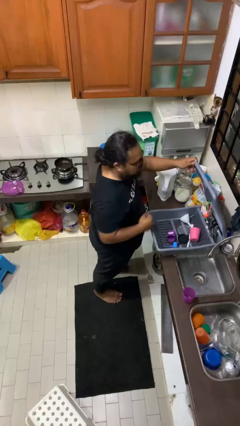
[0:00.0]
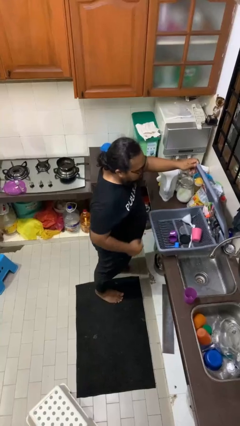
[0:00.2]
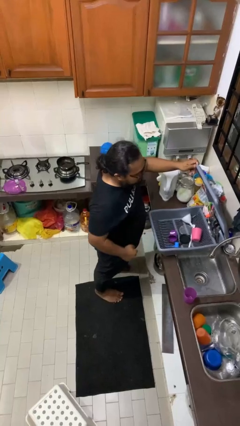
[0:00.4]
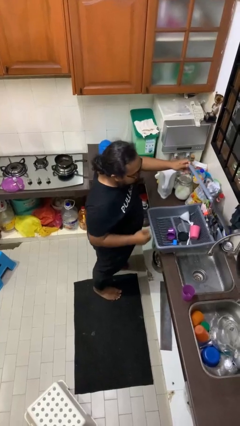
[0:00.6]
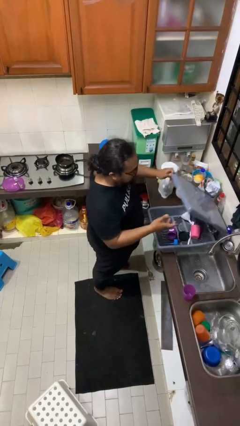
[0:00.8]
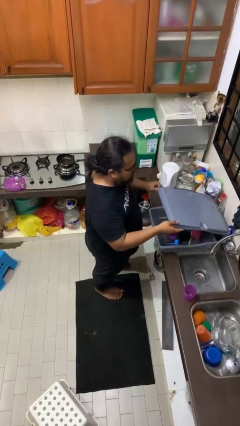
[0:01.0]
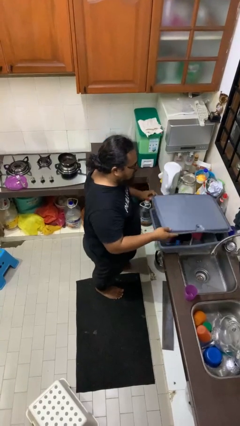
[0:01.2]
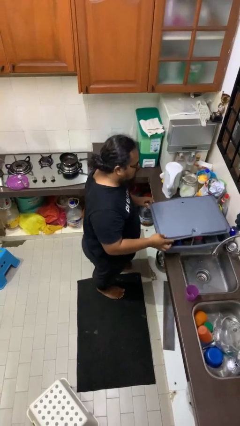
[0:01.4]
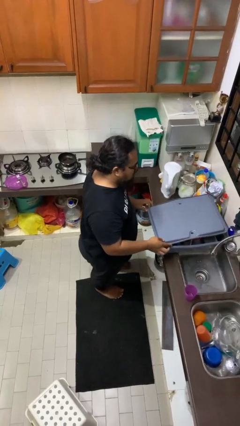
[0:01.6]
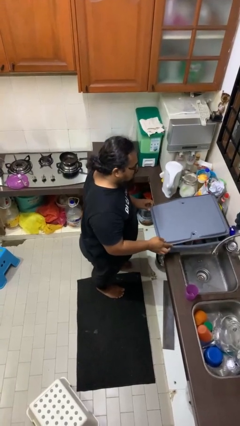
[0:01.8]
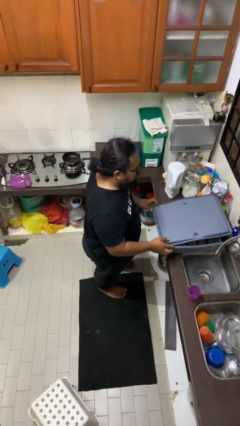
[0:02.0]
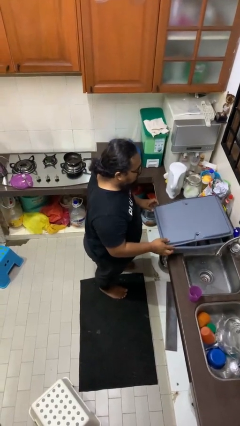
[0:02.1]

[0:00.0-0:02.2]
person closes dishwasher

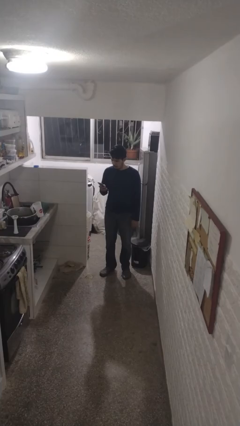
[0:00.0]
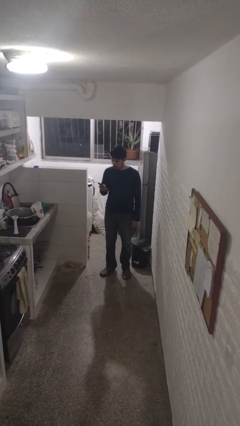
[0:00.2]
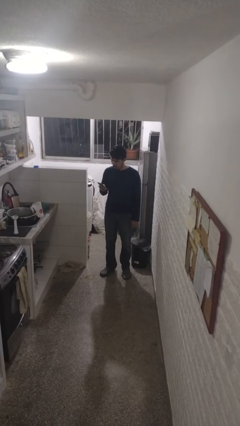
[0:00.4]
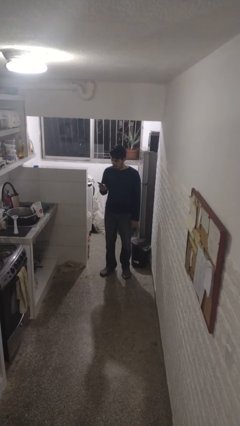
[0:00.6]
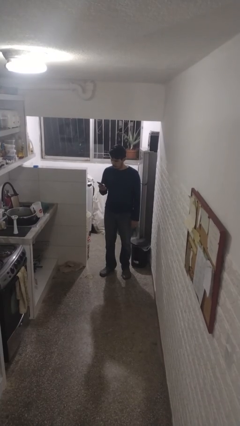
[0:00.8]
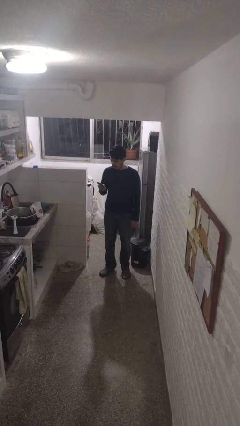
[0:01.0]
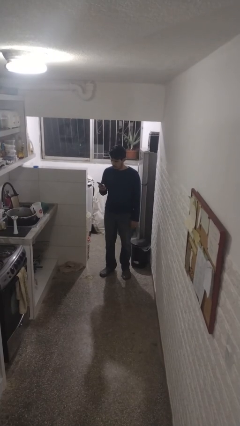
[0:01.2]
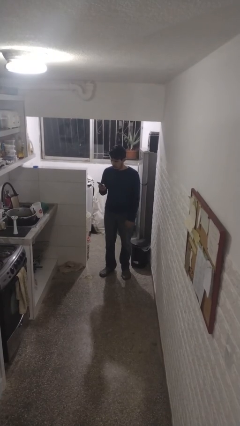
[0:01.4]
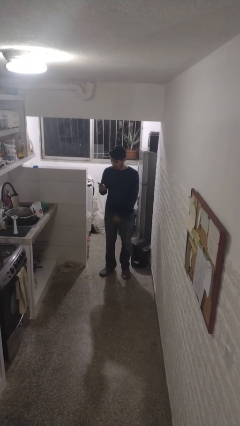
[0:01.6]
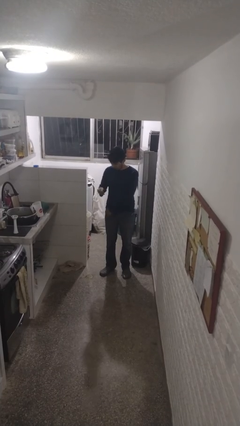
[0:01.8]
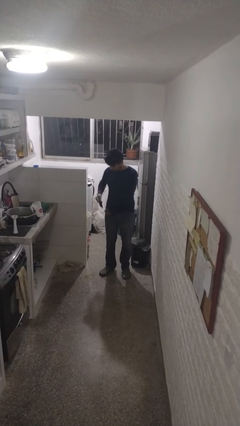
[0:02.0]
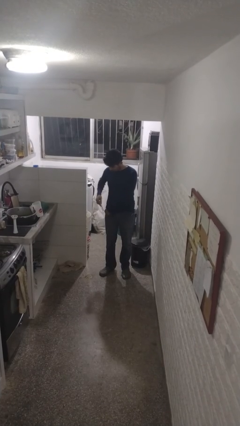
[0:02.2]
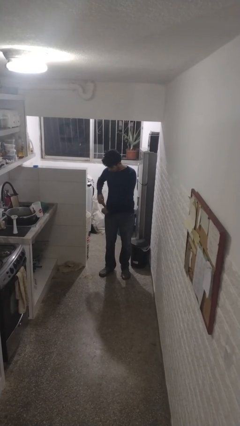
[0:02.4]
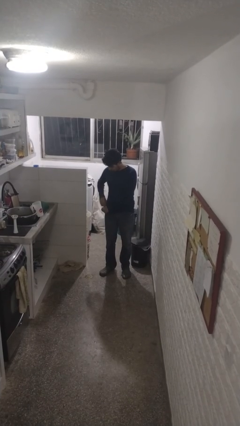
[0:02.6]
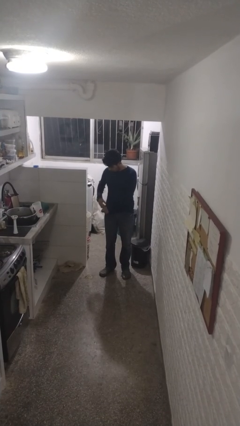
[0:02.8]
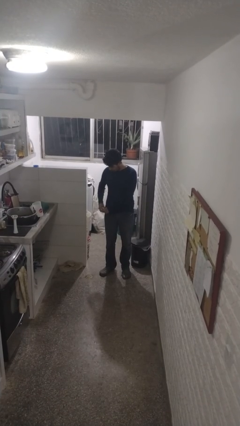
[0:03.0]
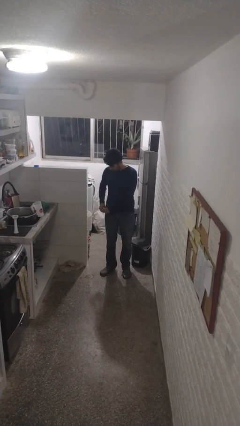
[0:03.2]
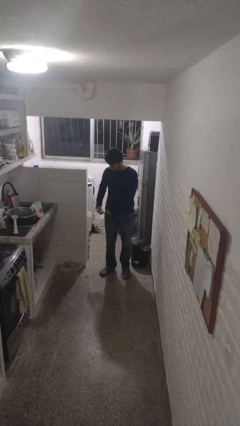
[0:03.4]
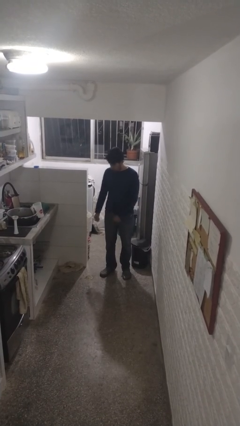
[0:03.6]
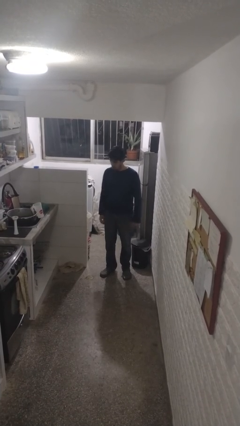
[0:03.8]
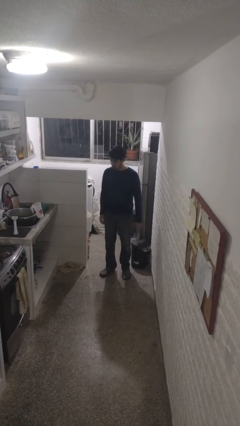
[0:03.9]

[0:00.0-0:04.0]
person puts phone into pocket

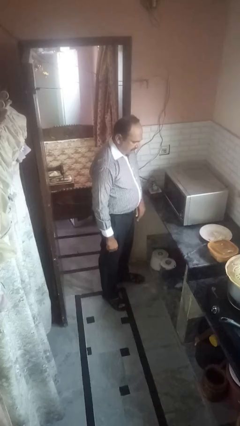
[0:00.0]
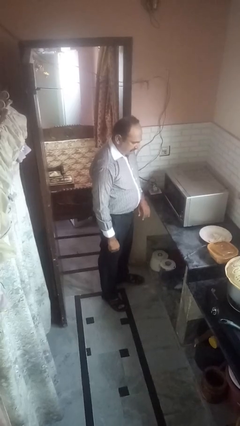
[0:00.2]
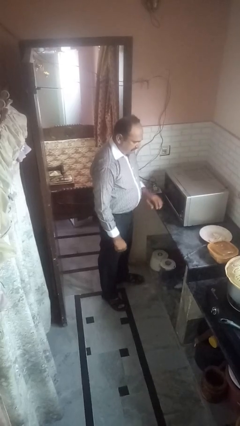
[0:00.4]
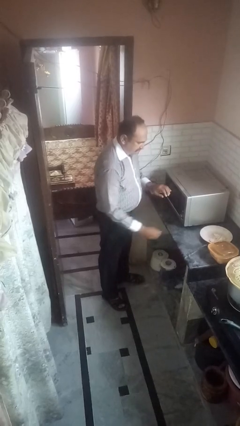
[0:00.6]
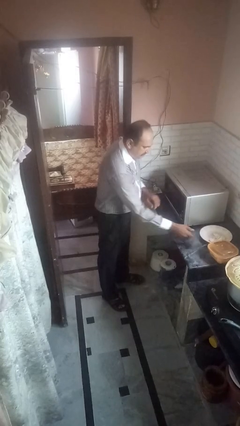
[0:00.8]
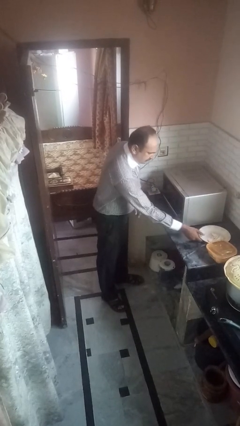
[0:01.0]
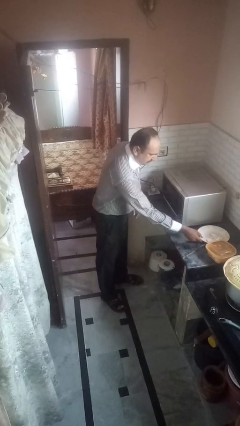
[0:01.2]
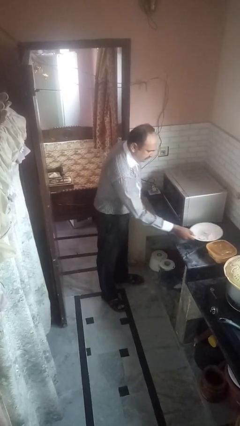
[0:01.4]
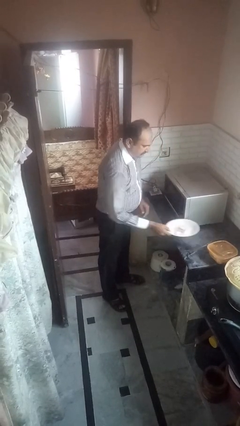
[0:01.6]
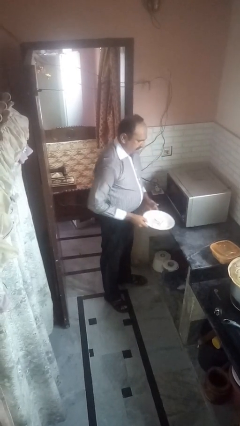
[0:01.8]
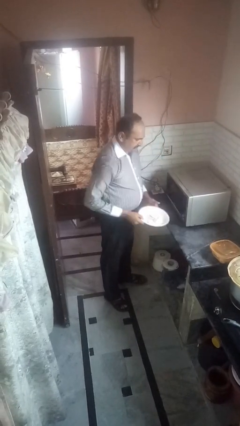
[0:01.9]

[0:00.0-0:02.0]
person takes object from microwave

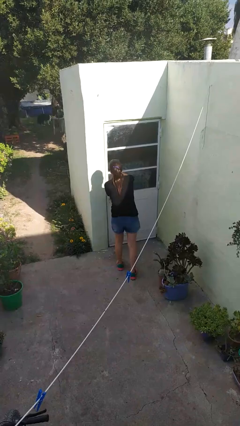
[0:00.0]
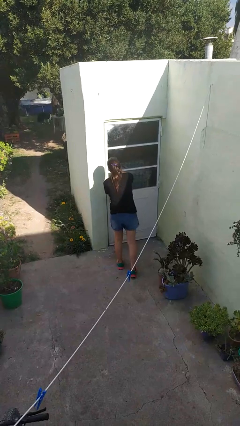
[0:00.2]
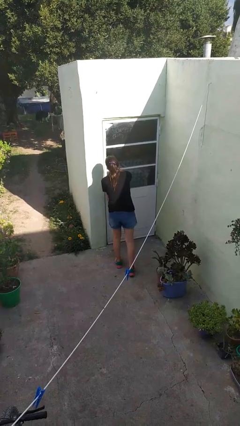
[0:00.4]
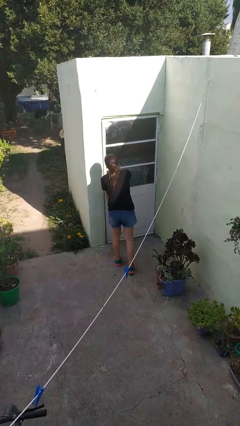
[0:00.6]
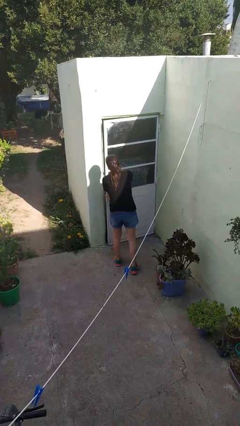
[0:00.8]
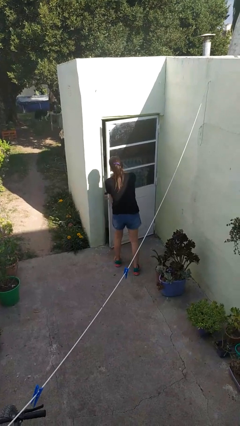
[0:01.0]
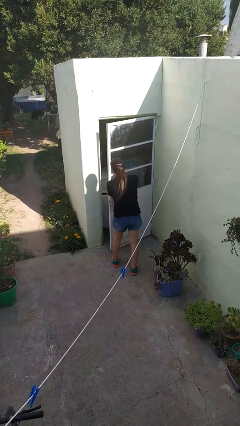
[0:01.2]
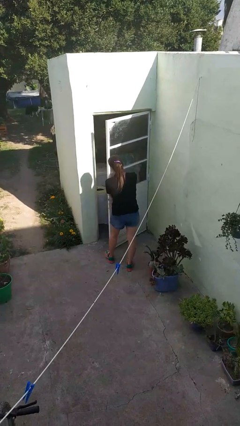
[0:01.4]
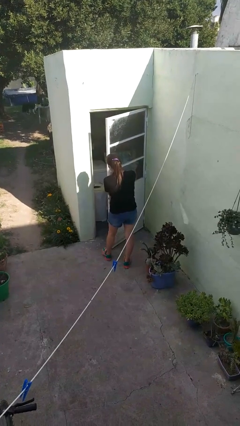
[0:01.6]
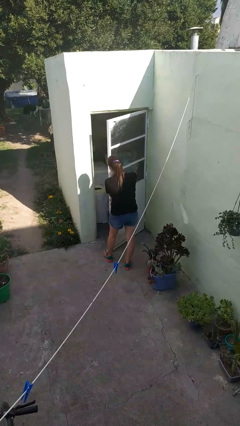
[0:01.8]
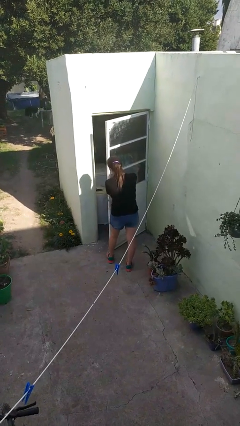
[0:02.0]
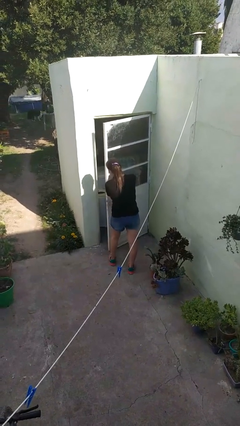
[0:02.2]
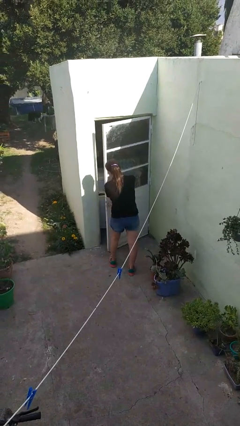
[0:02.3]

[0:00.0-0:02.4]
person opens facility door

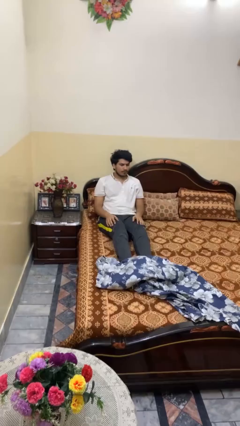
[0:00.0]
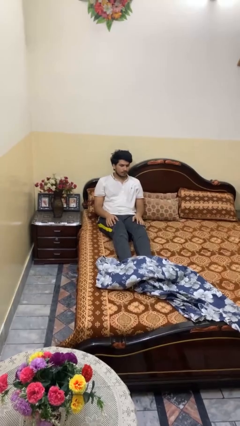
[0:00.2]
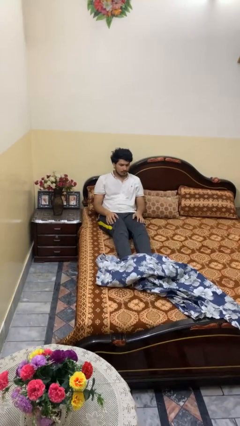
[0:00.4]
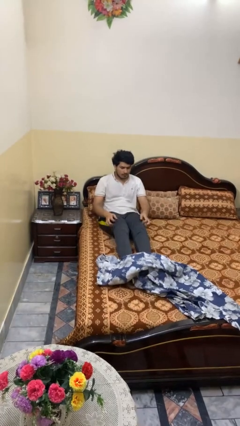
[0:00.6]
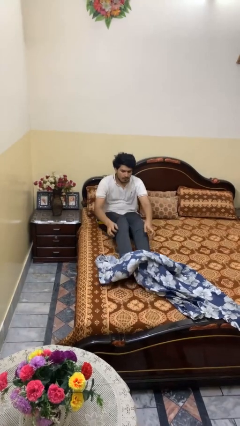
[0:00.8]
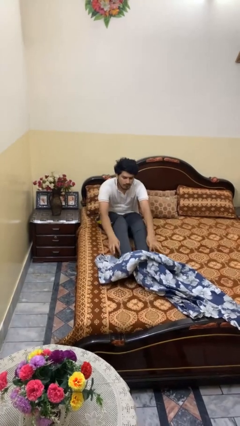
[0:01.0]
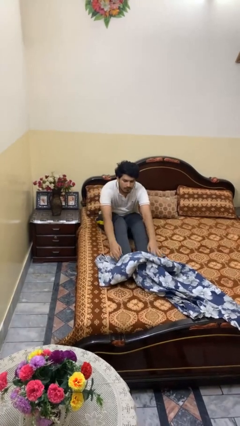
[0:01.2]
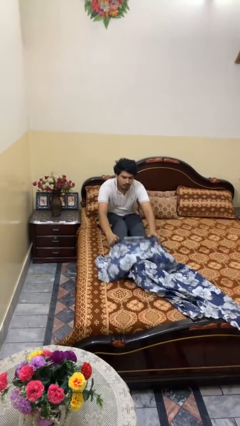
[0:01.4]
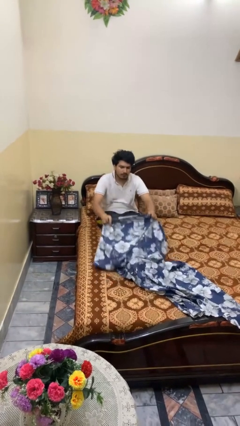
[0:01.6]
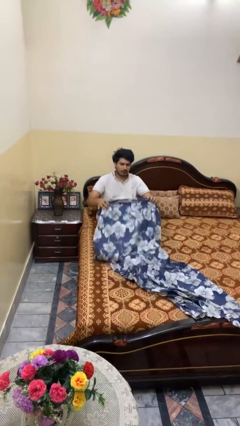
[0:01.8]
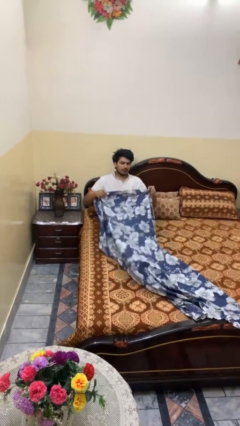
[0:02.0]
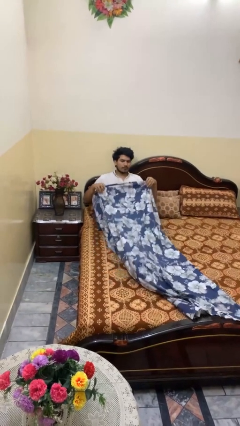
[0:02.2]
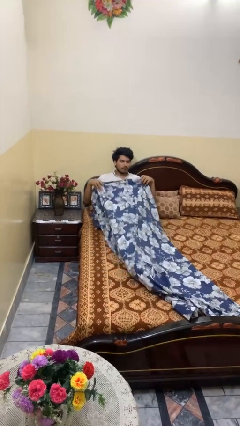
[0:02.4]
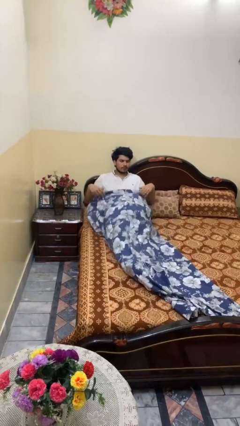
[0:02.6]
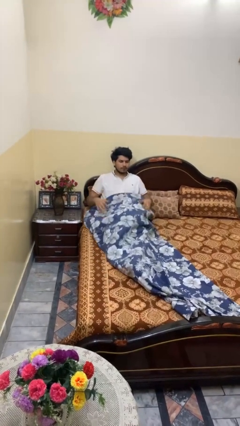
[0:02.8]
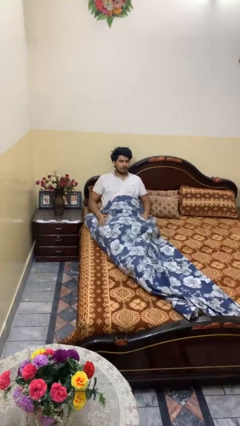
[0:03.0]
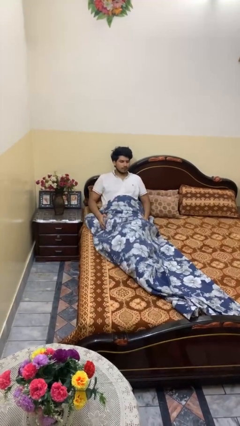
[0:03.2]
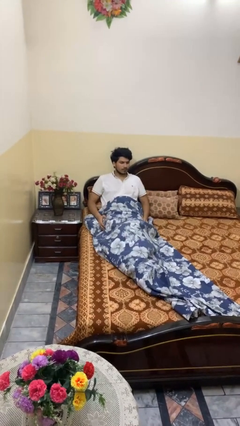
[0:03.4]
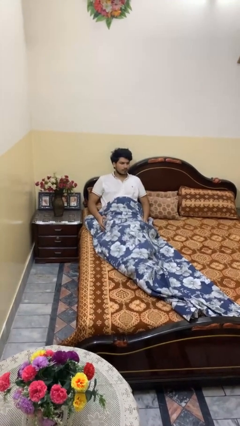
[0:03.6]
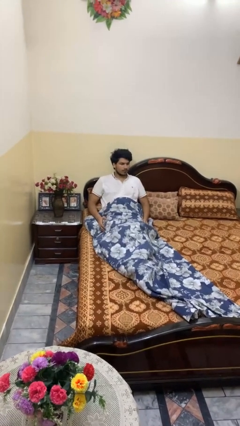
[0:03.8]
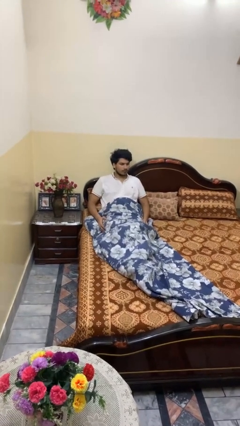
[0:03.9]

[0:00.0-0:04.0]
person covers with bedsheets

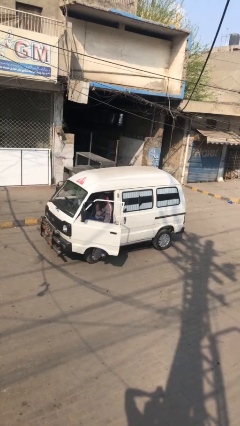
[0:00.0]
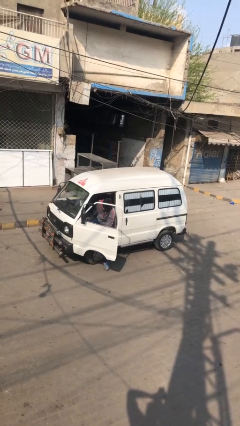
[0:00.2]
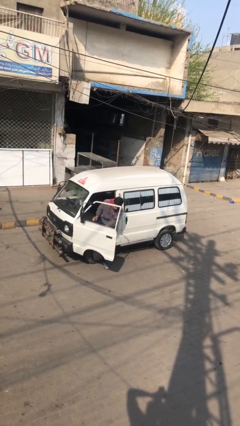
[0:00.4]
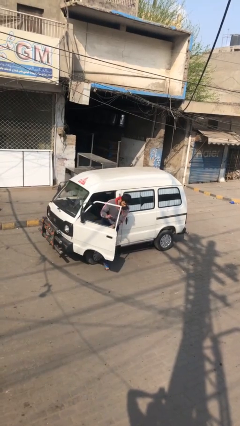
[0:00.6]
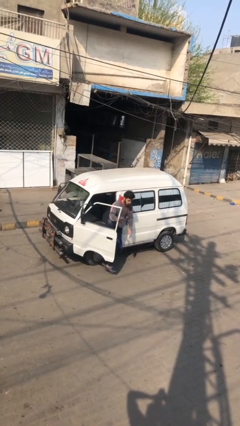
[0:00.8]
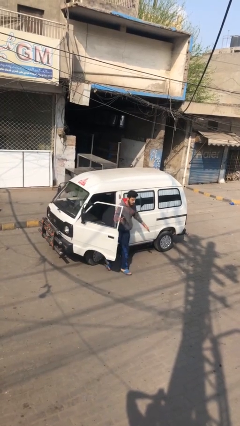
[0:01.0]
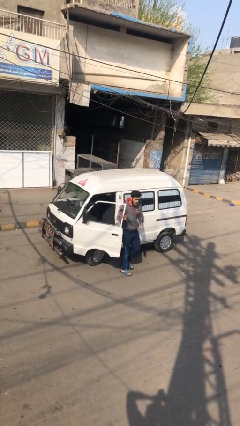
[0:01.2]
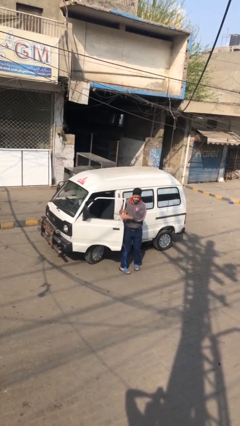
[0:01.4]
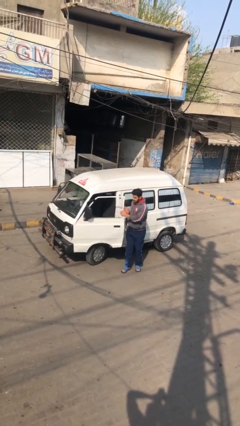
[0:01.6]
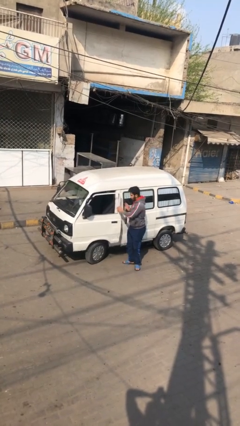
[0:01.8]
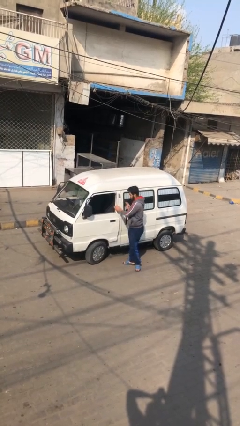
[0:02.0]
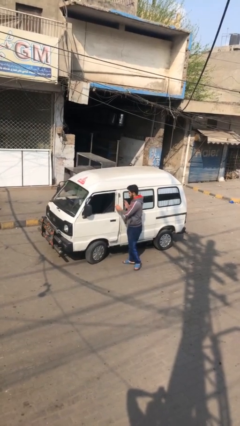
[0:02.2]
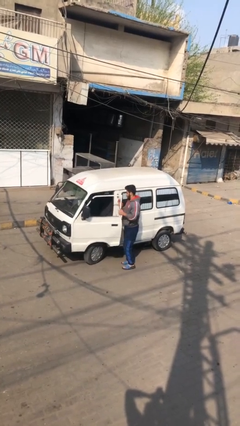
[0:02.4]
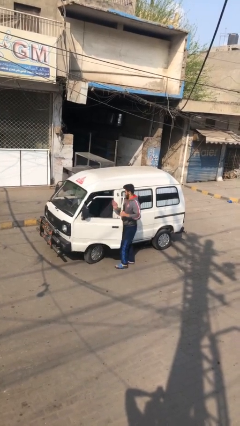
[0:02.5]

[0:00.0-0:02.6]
car drops off person

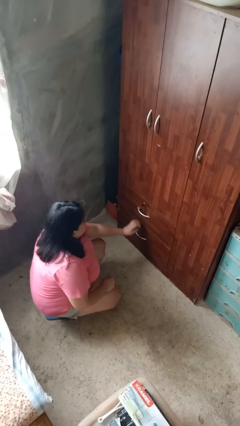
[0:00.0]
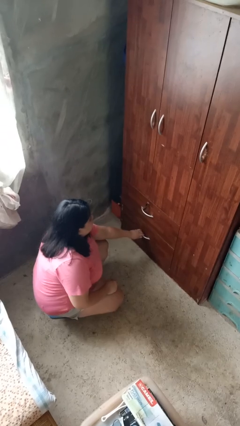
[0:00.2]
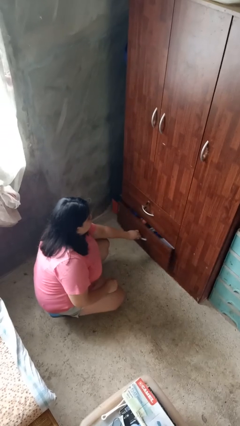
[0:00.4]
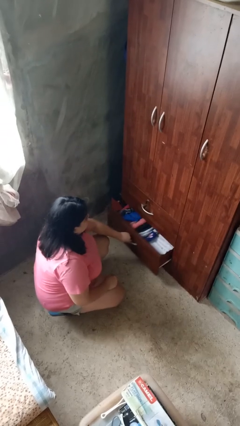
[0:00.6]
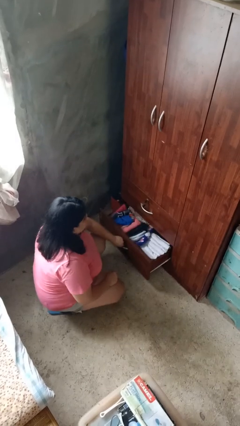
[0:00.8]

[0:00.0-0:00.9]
person opens dresser drawer
